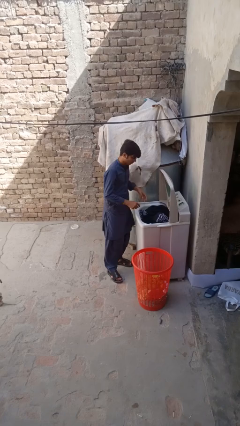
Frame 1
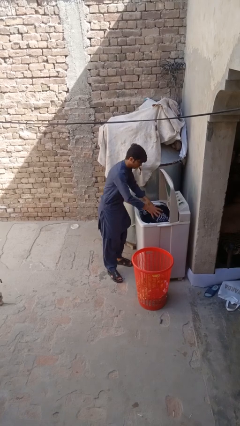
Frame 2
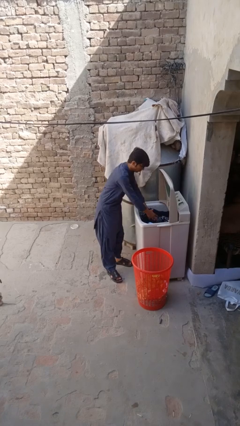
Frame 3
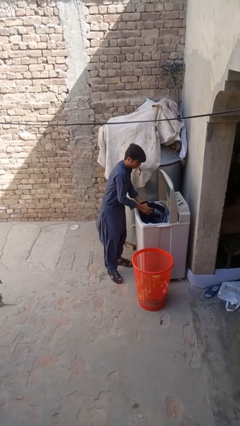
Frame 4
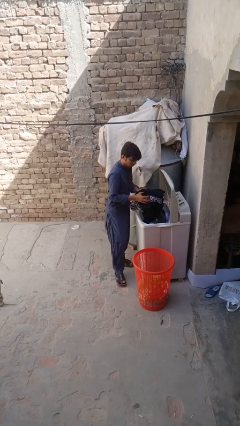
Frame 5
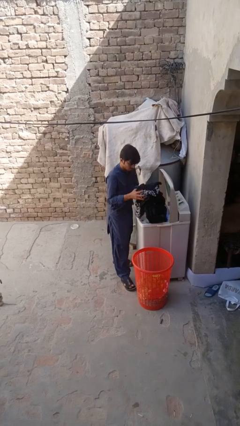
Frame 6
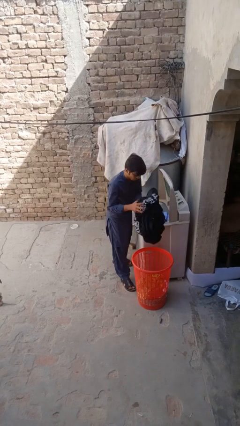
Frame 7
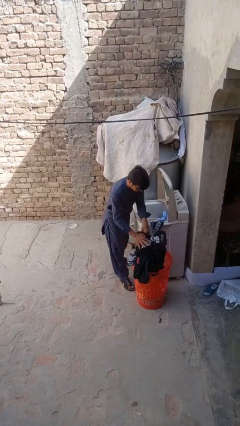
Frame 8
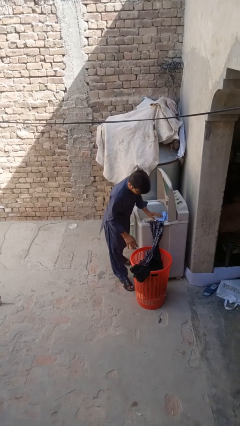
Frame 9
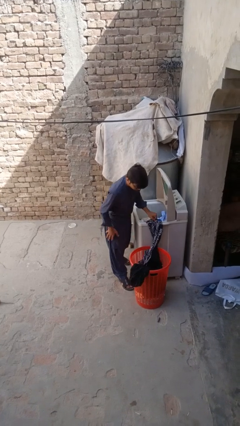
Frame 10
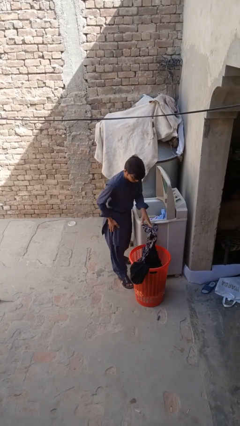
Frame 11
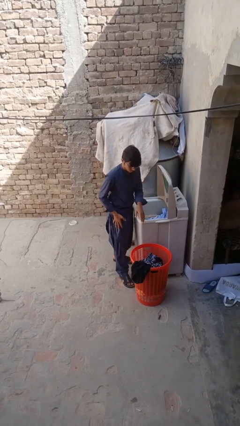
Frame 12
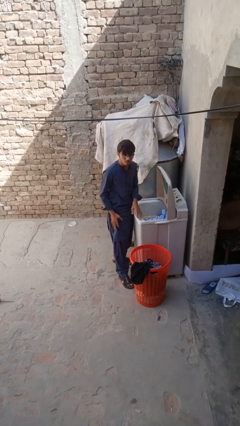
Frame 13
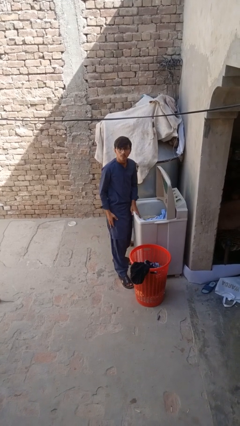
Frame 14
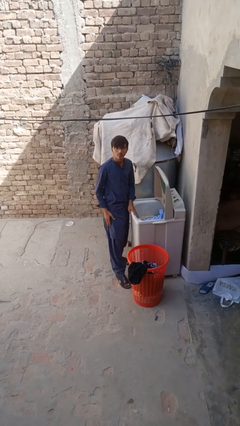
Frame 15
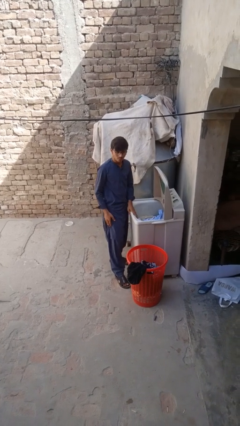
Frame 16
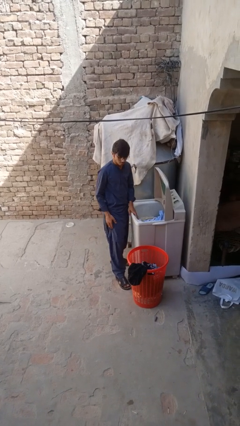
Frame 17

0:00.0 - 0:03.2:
person unloads clotheswasher

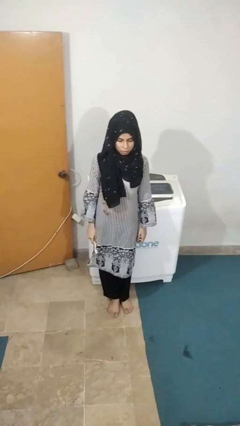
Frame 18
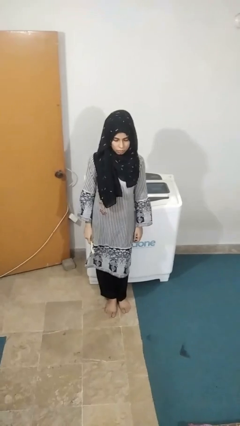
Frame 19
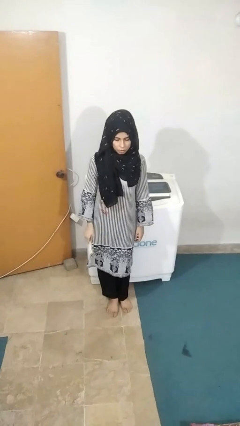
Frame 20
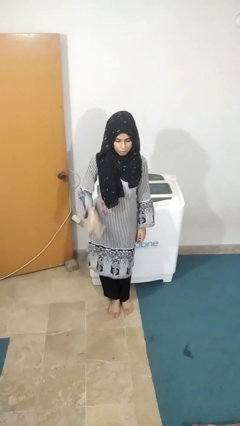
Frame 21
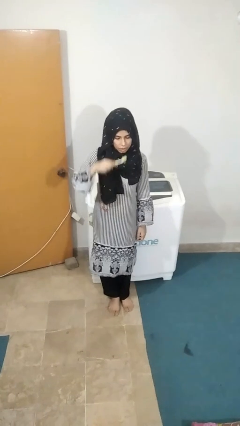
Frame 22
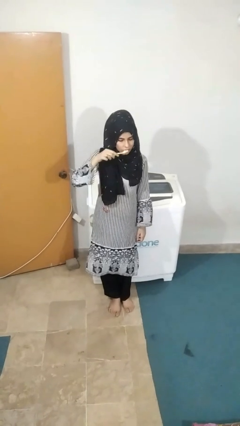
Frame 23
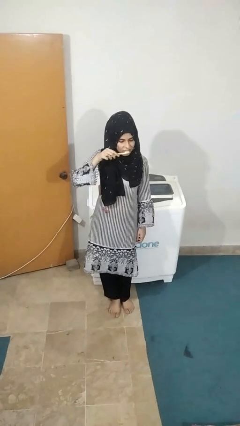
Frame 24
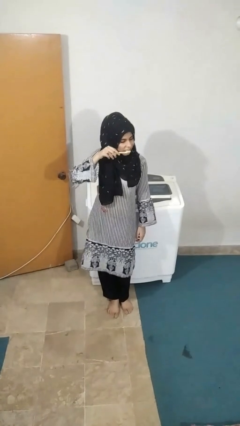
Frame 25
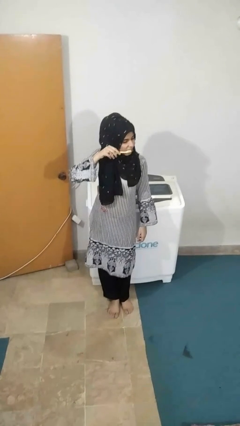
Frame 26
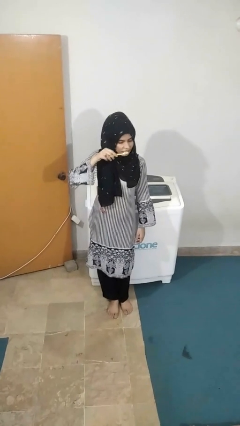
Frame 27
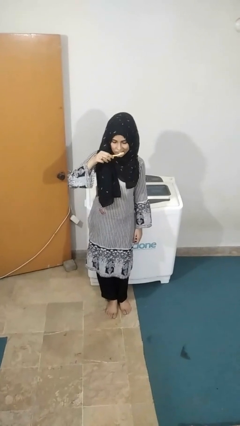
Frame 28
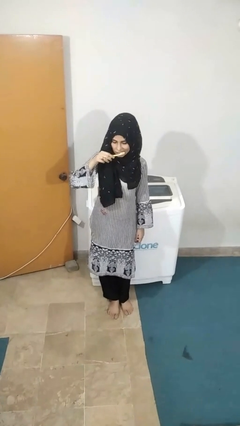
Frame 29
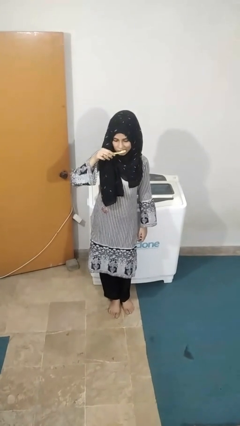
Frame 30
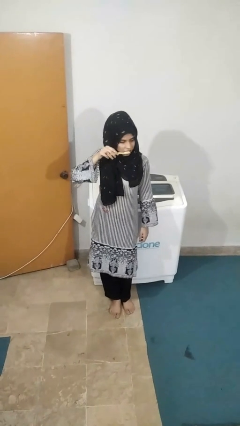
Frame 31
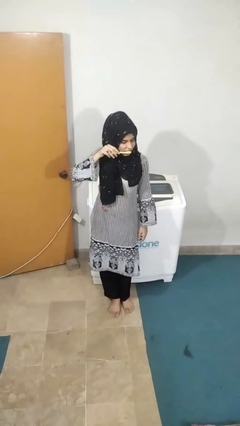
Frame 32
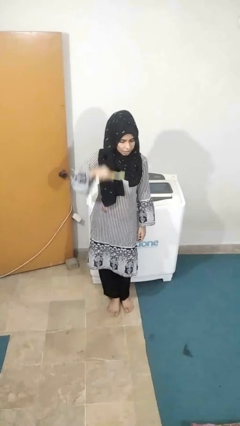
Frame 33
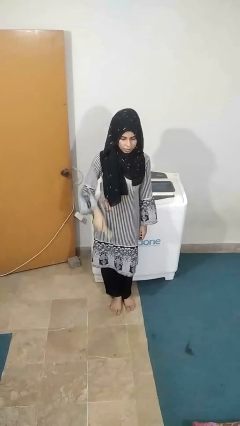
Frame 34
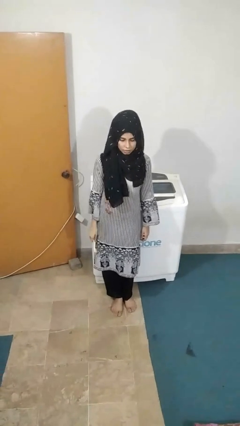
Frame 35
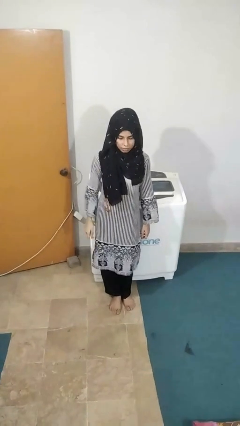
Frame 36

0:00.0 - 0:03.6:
person brushes teeth

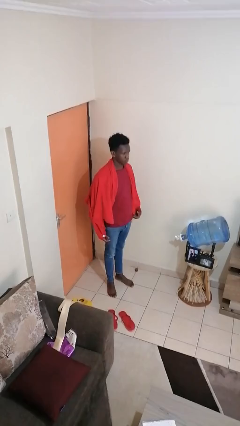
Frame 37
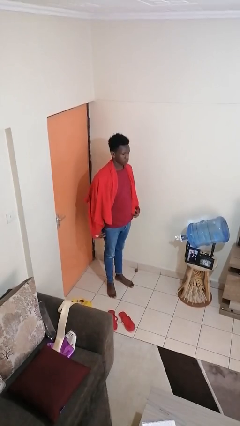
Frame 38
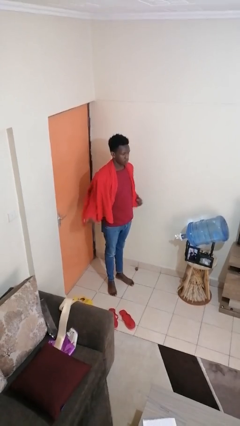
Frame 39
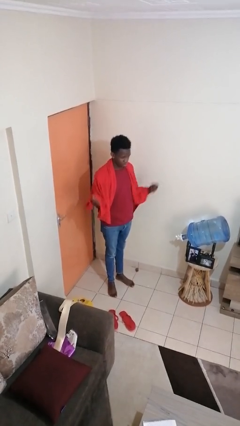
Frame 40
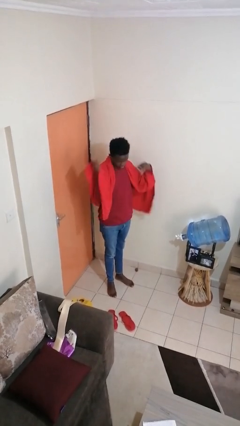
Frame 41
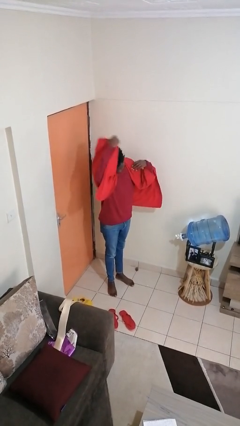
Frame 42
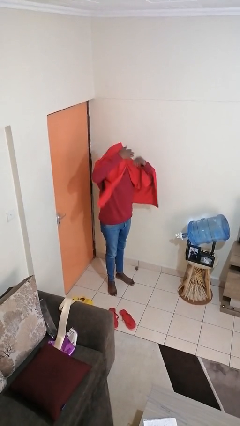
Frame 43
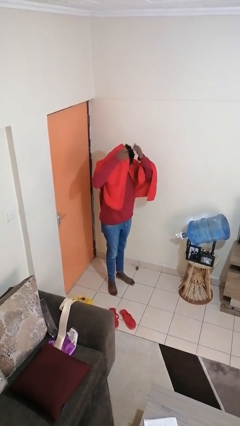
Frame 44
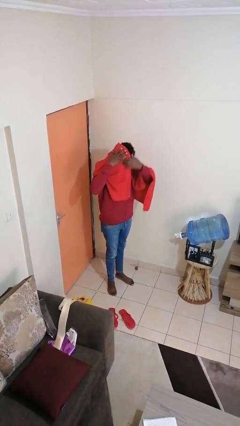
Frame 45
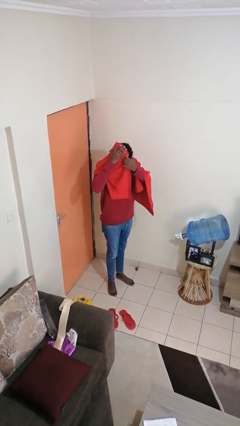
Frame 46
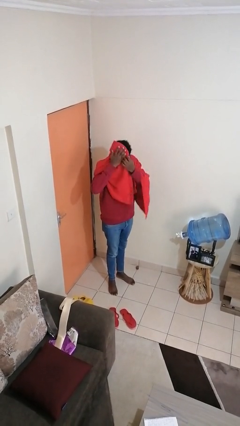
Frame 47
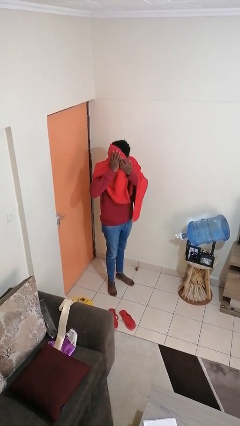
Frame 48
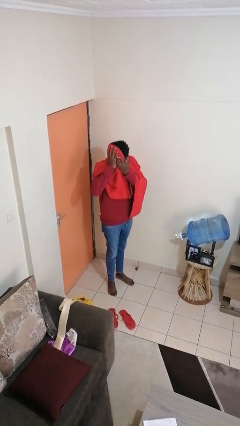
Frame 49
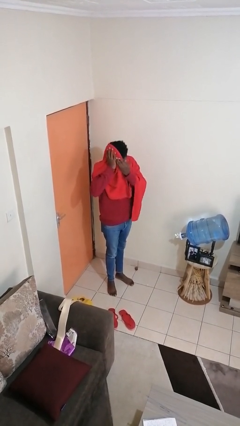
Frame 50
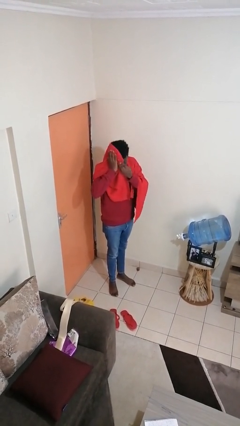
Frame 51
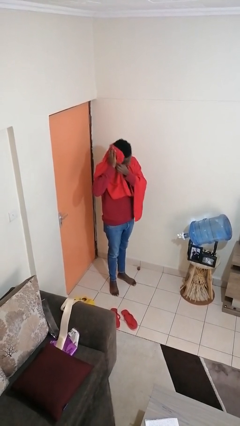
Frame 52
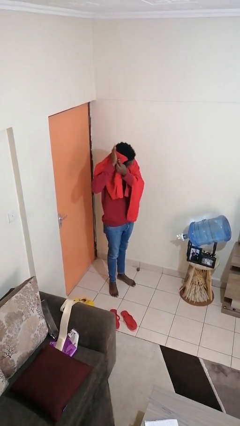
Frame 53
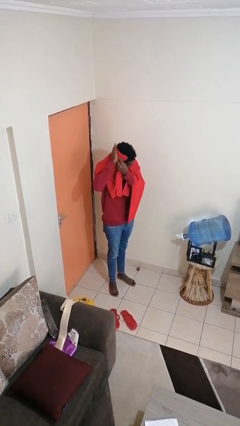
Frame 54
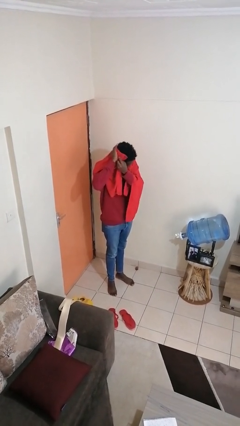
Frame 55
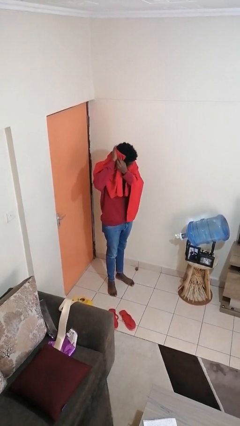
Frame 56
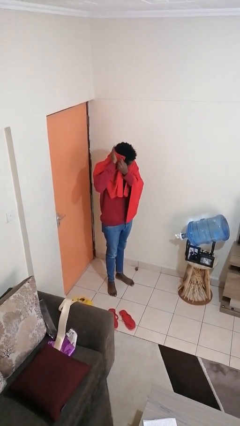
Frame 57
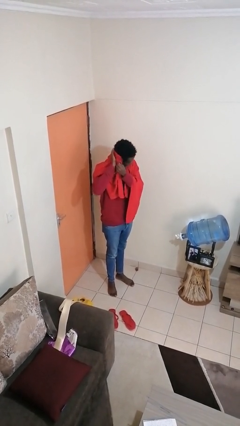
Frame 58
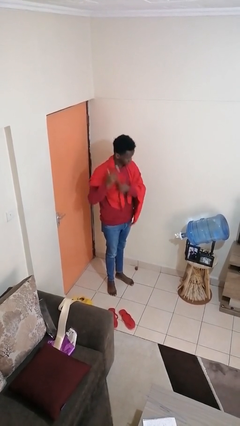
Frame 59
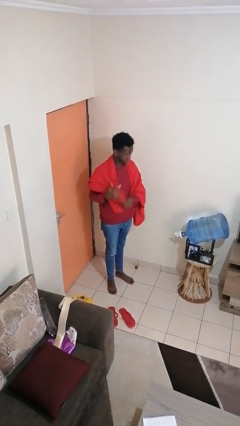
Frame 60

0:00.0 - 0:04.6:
person dries hair with towel

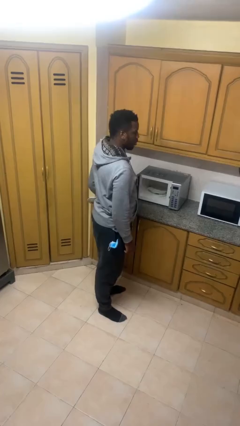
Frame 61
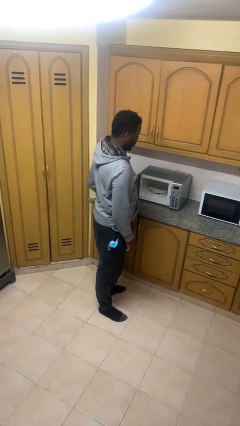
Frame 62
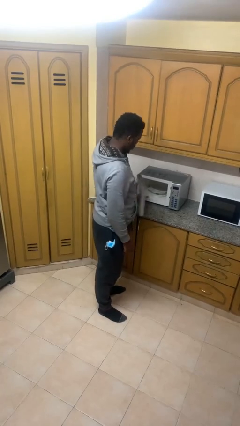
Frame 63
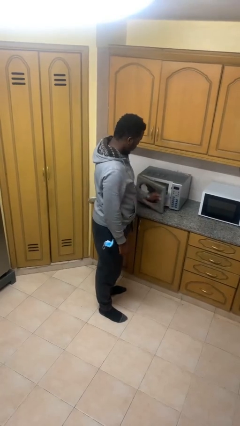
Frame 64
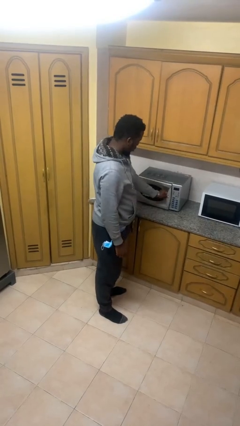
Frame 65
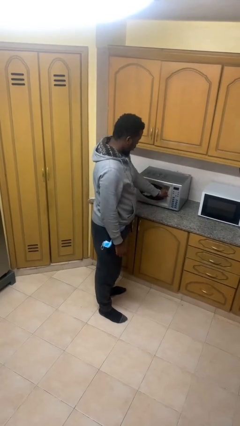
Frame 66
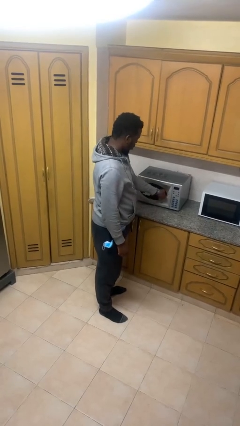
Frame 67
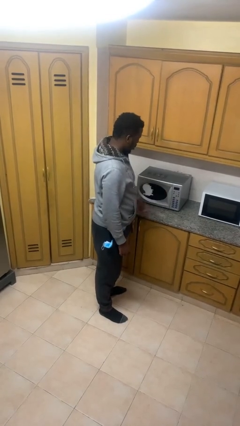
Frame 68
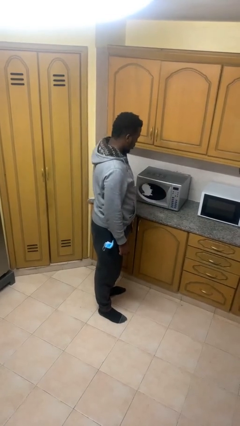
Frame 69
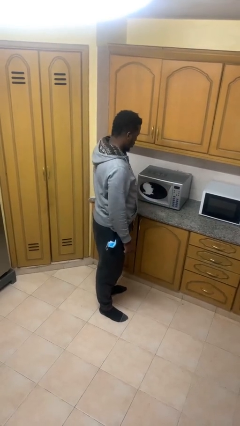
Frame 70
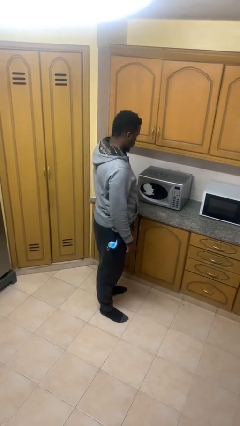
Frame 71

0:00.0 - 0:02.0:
person closes microwave

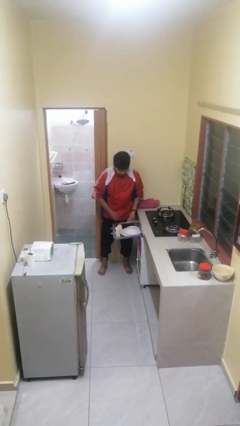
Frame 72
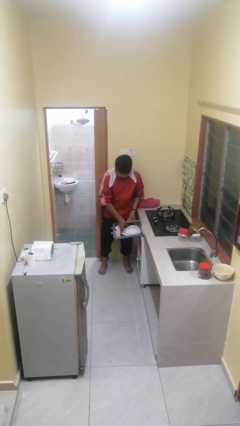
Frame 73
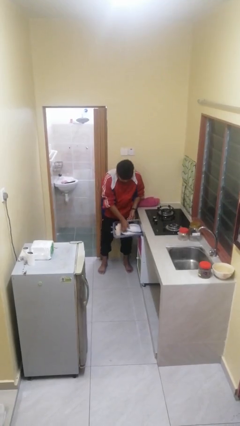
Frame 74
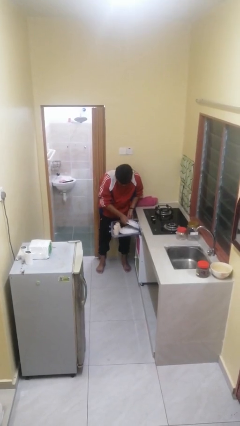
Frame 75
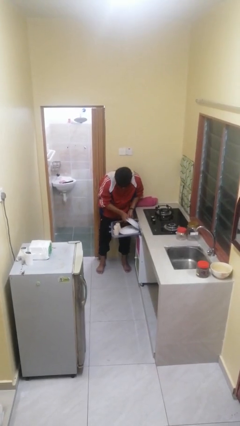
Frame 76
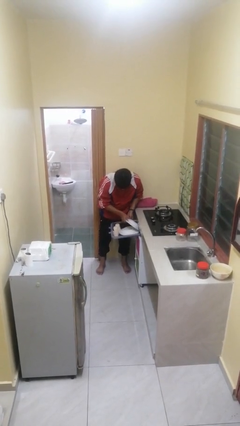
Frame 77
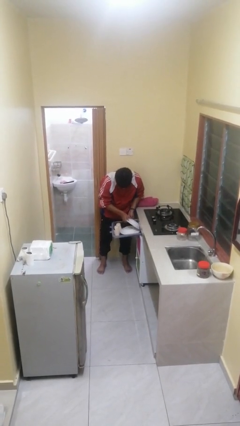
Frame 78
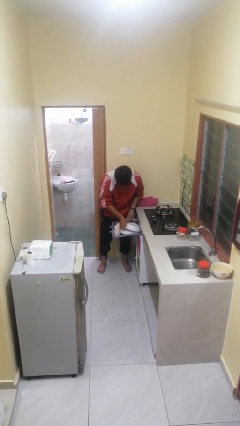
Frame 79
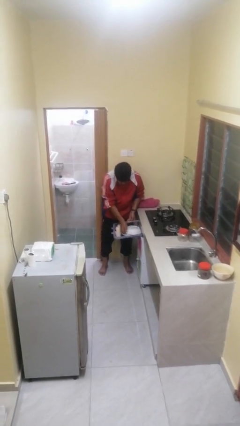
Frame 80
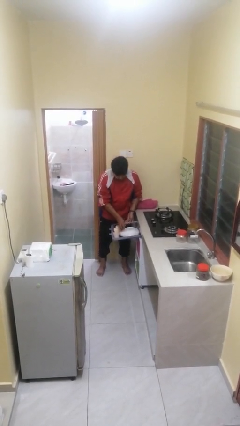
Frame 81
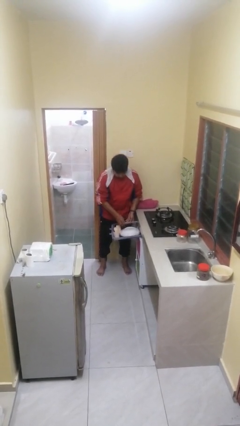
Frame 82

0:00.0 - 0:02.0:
person searches in kitchen drawer

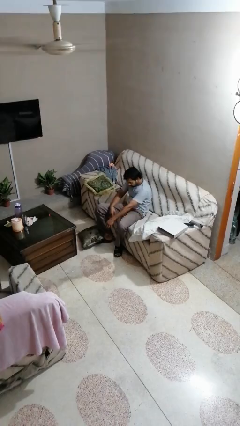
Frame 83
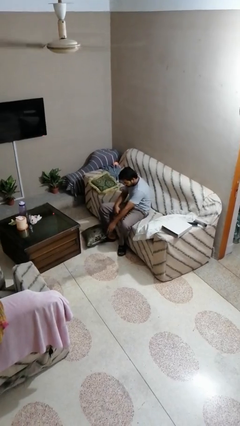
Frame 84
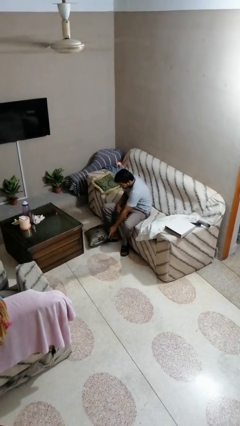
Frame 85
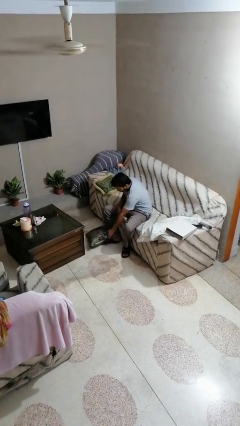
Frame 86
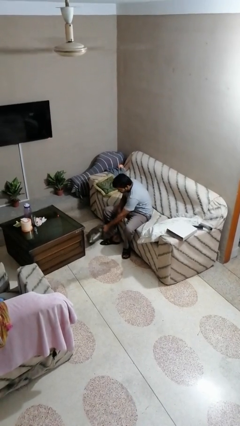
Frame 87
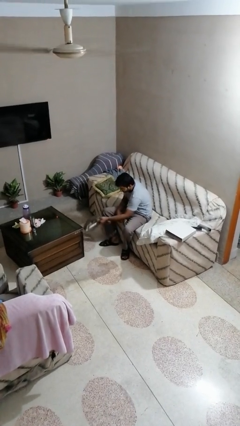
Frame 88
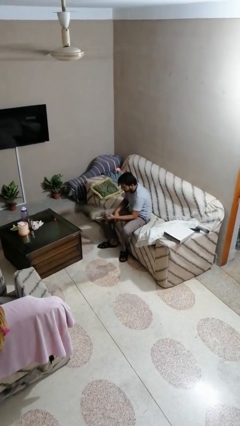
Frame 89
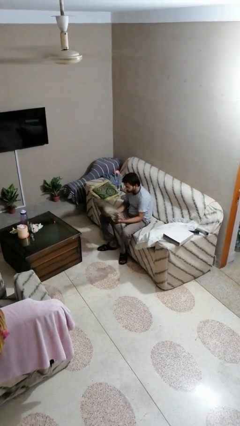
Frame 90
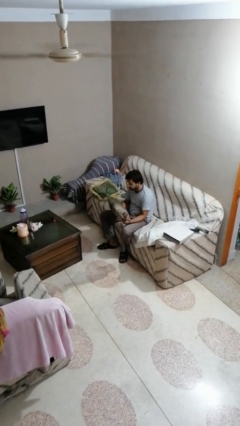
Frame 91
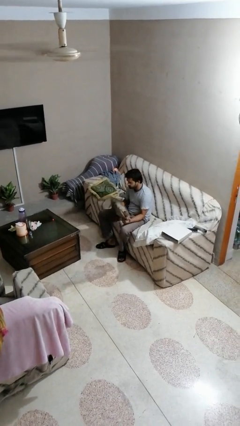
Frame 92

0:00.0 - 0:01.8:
person picks up object from floor

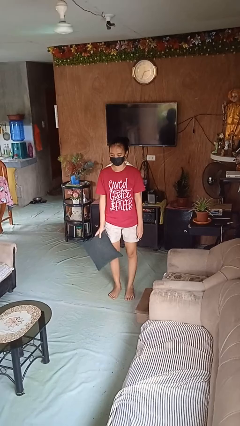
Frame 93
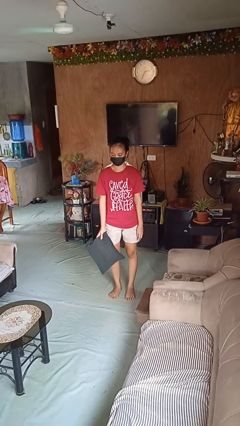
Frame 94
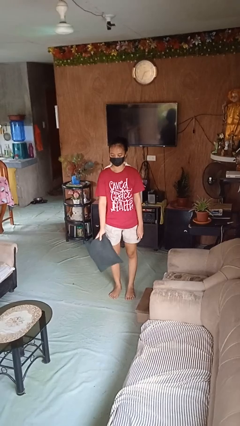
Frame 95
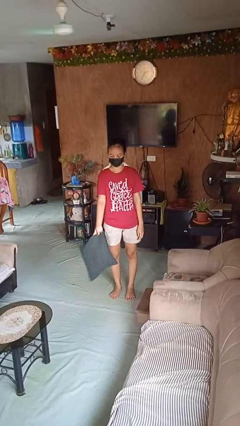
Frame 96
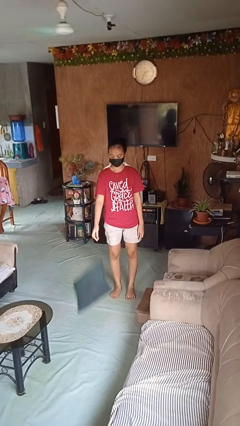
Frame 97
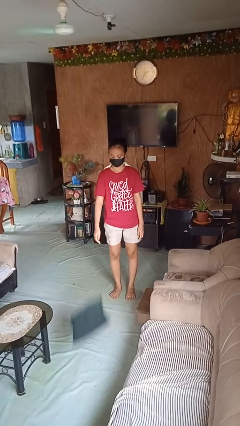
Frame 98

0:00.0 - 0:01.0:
person throws object to ground
